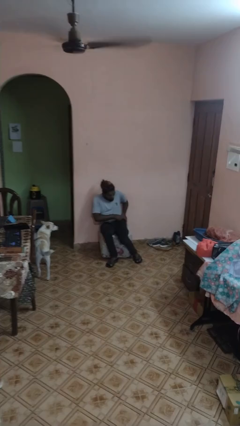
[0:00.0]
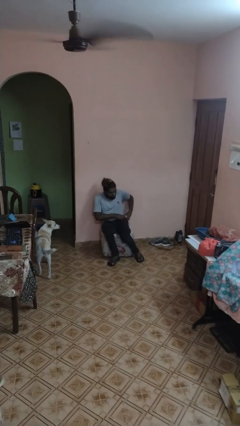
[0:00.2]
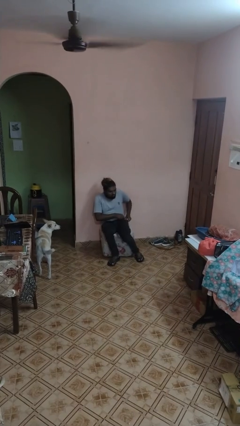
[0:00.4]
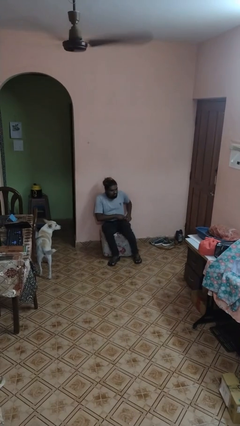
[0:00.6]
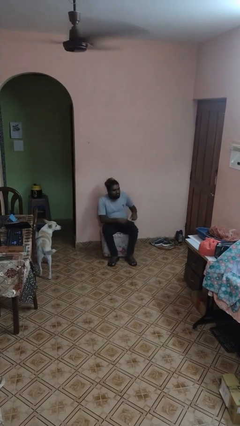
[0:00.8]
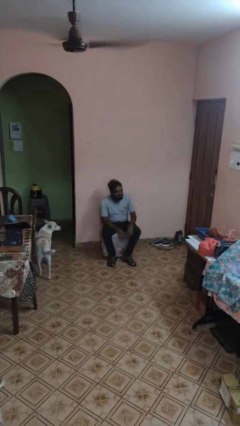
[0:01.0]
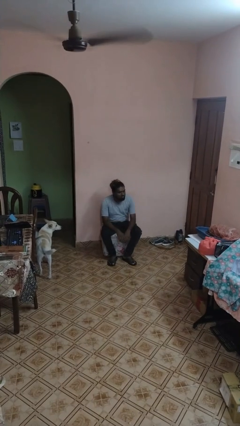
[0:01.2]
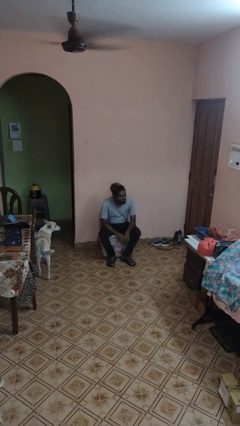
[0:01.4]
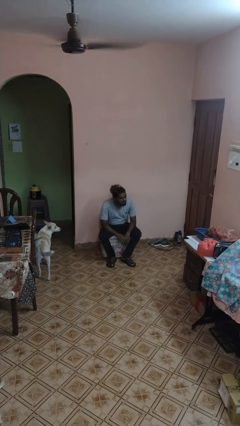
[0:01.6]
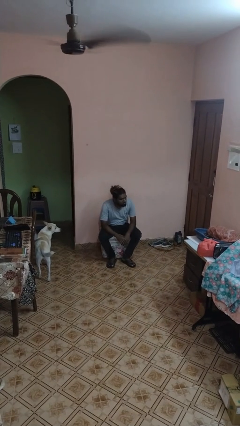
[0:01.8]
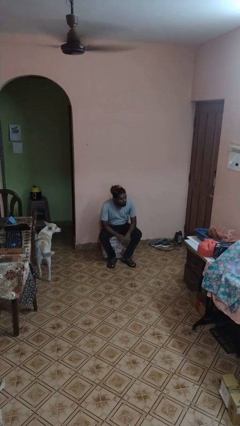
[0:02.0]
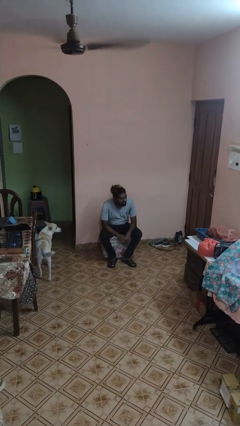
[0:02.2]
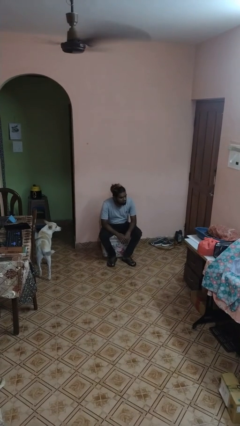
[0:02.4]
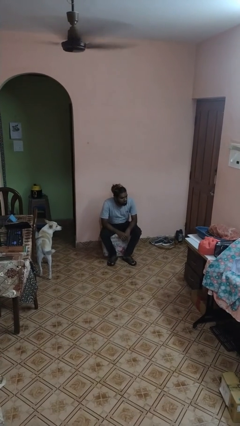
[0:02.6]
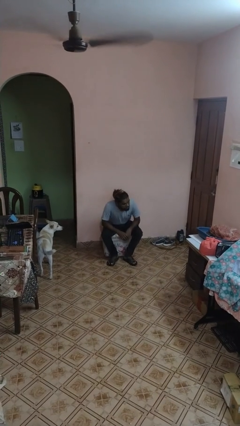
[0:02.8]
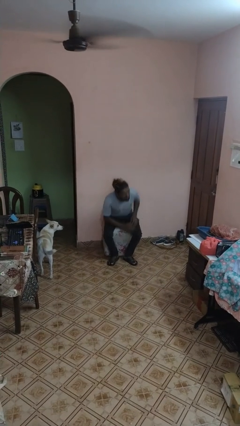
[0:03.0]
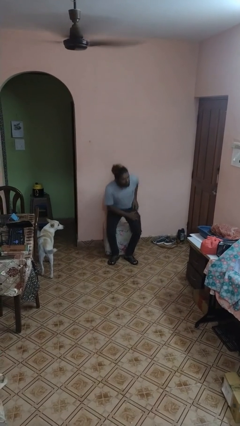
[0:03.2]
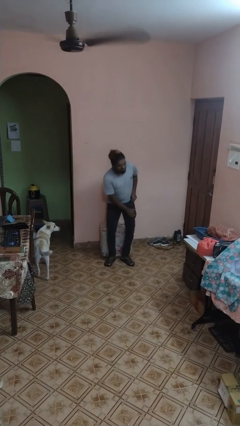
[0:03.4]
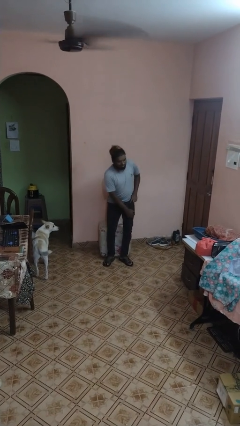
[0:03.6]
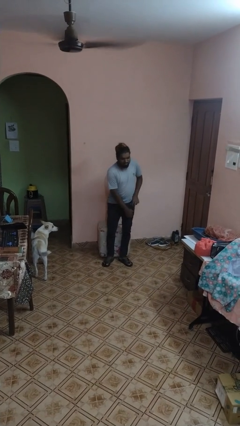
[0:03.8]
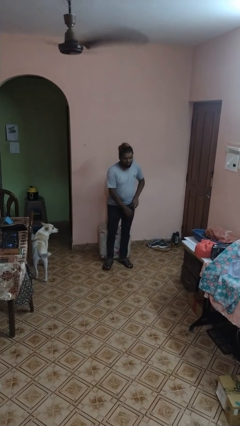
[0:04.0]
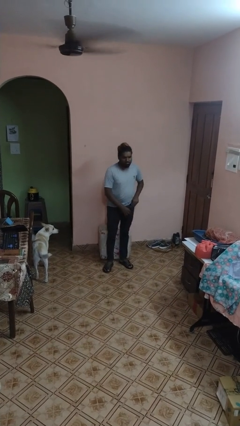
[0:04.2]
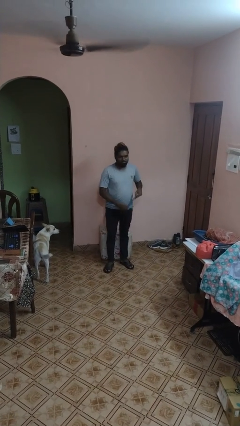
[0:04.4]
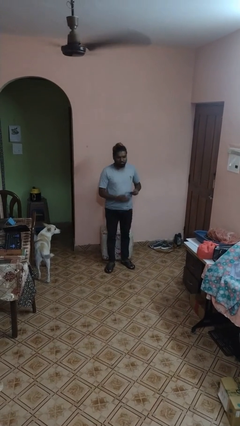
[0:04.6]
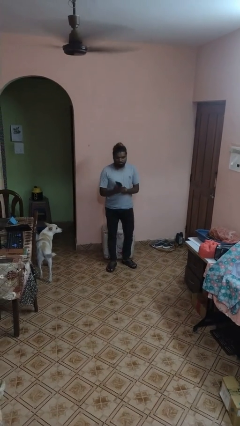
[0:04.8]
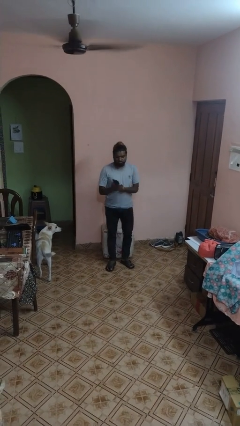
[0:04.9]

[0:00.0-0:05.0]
person puts phone into pocket

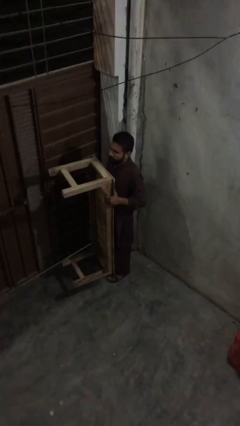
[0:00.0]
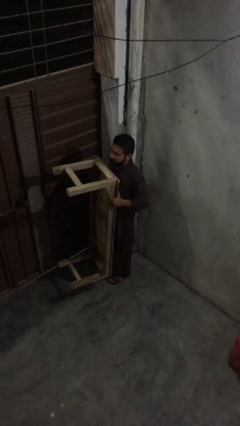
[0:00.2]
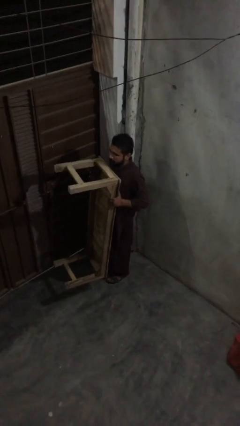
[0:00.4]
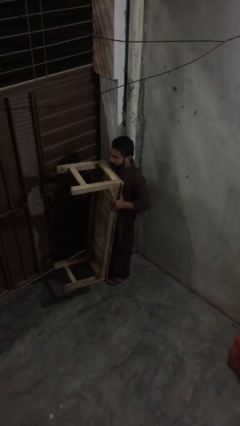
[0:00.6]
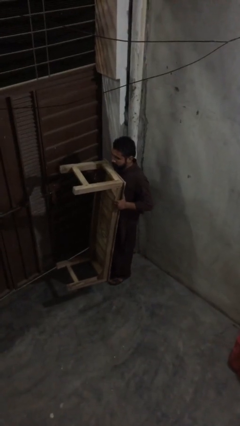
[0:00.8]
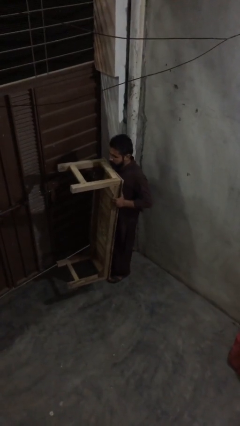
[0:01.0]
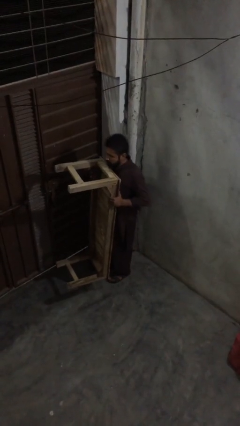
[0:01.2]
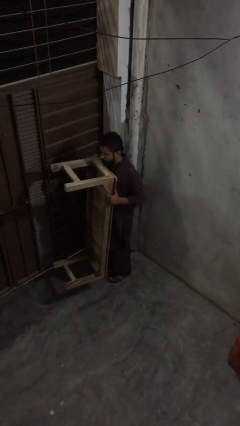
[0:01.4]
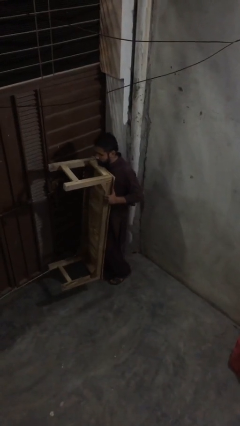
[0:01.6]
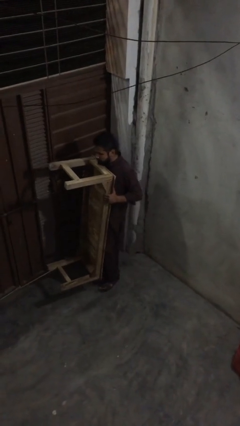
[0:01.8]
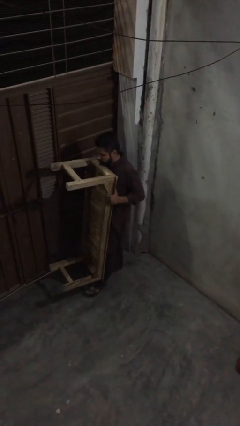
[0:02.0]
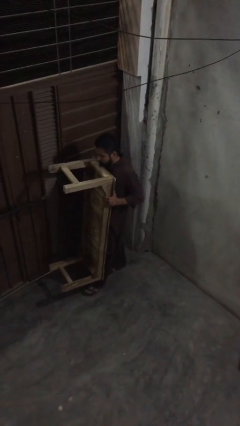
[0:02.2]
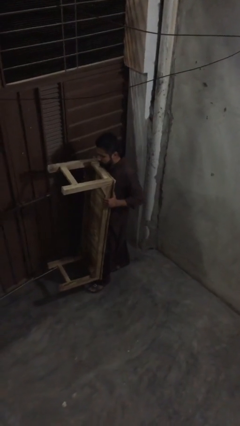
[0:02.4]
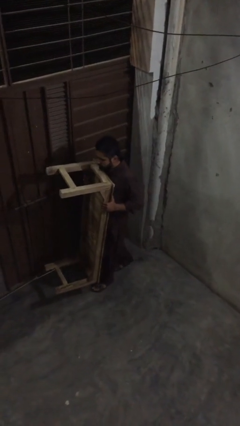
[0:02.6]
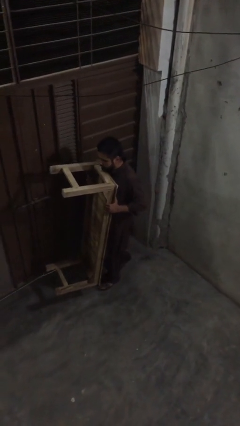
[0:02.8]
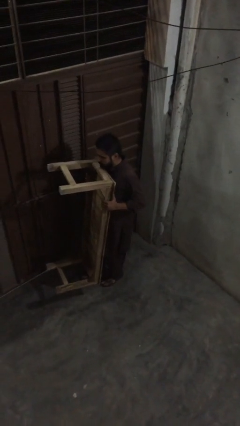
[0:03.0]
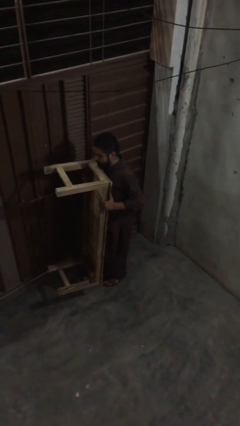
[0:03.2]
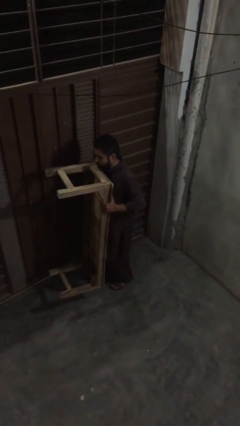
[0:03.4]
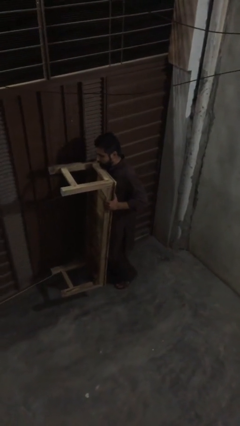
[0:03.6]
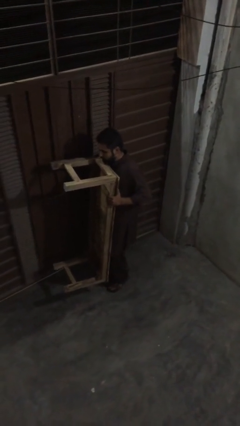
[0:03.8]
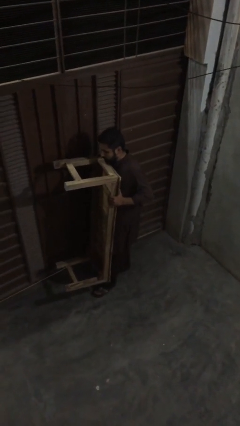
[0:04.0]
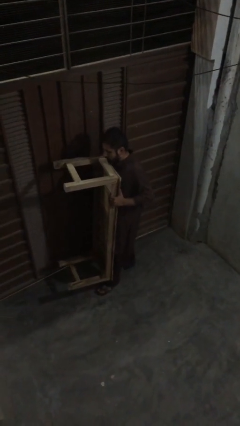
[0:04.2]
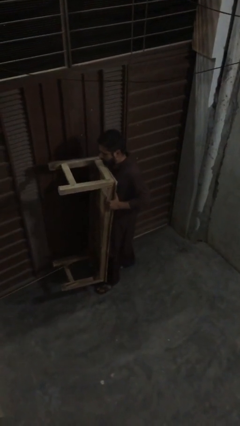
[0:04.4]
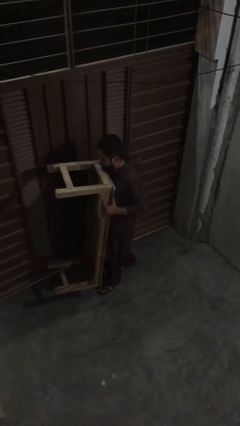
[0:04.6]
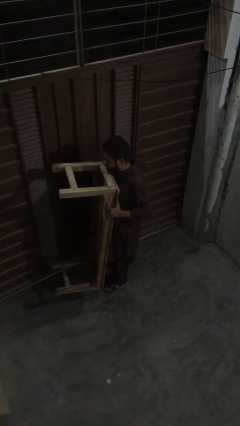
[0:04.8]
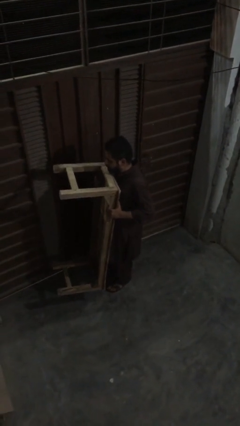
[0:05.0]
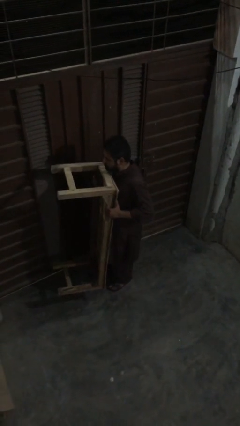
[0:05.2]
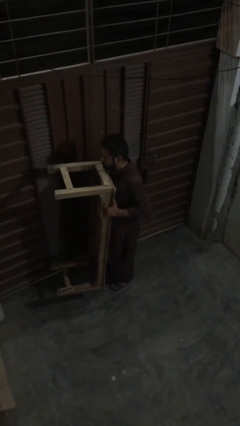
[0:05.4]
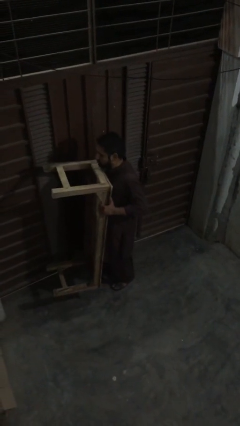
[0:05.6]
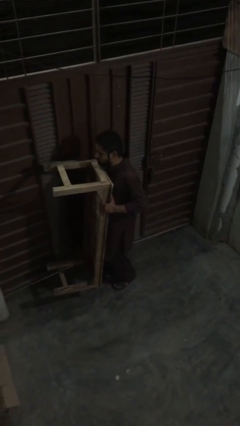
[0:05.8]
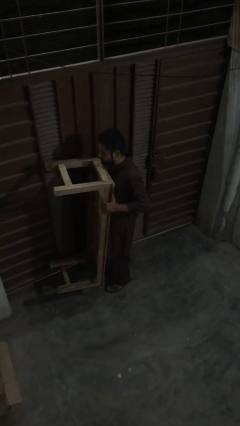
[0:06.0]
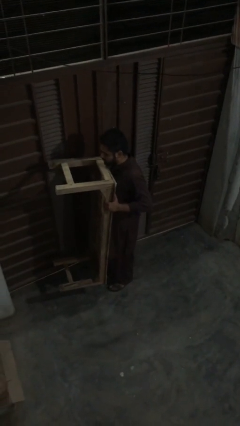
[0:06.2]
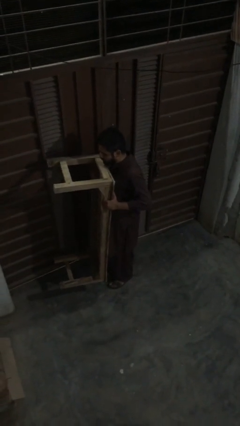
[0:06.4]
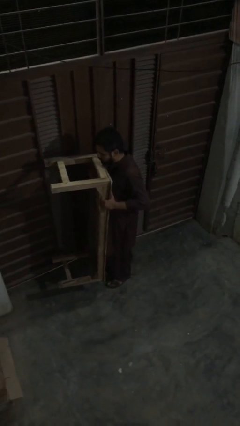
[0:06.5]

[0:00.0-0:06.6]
person carries heavy object

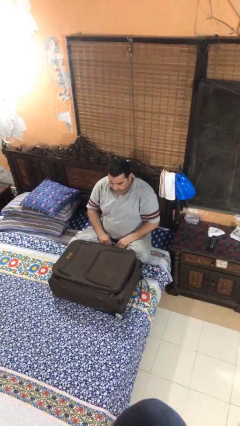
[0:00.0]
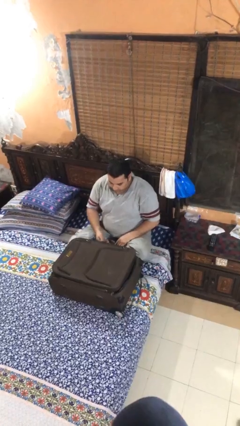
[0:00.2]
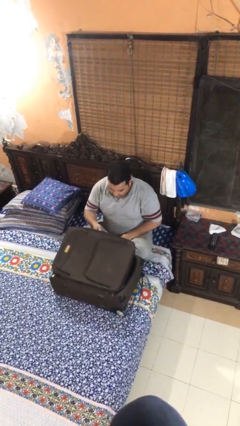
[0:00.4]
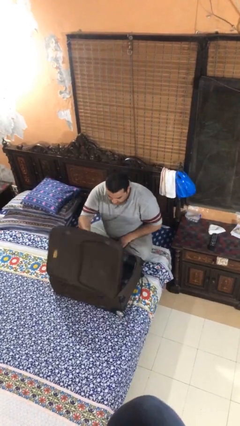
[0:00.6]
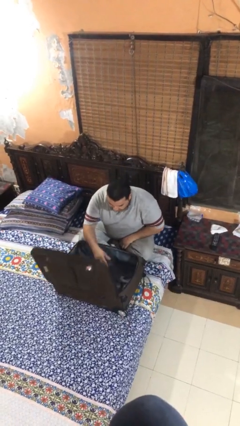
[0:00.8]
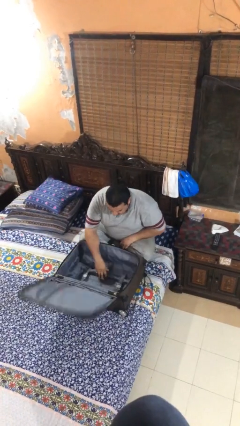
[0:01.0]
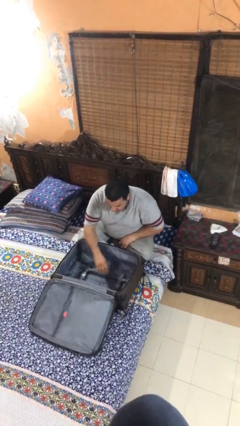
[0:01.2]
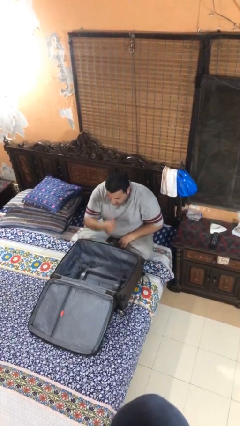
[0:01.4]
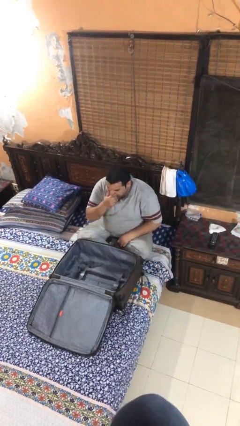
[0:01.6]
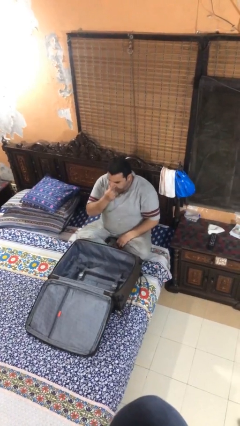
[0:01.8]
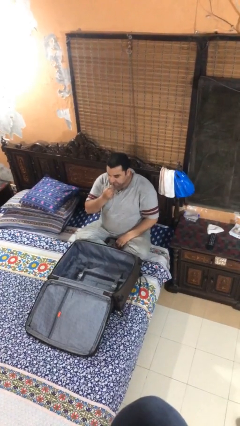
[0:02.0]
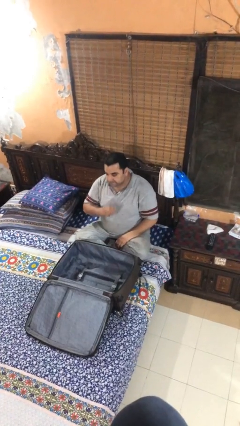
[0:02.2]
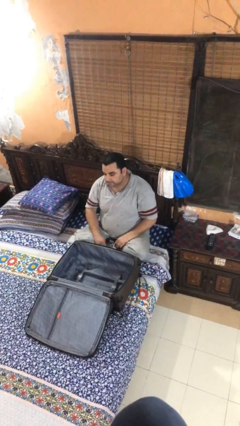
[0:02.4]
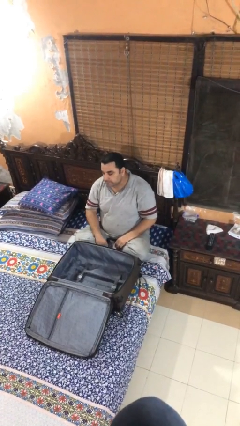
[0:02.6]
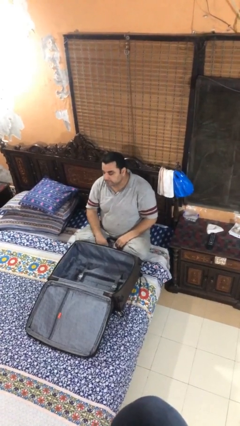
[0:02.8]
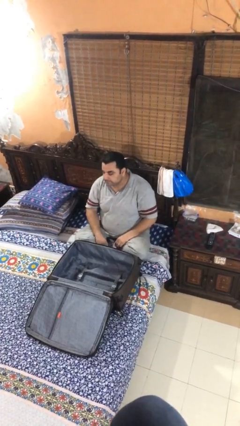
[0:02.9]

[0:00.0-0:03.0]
person opens suitcase

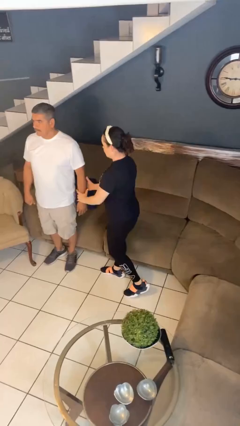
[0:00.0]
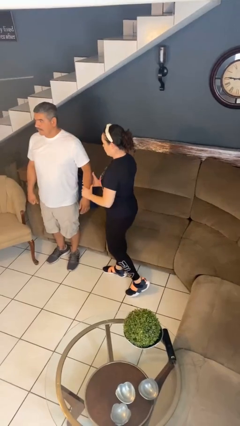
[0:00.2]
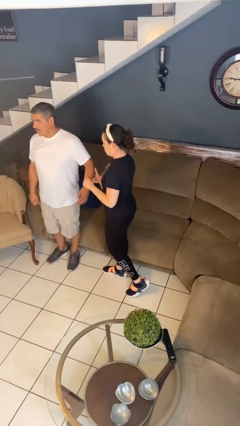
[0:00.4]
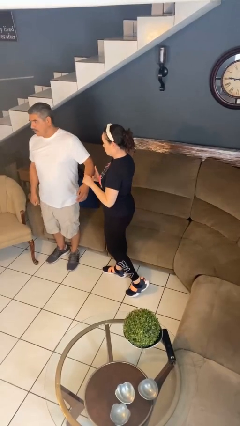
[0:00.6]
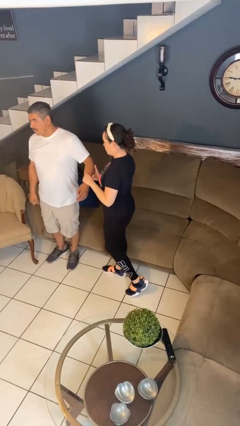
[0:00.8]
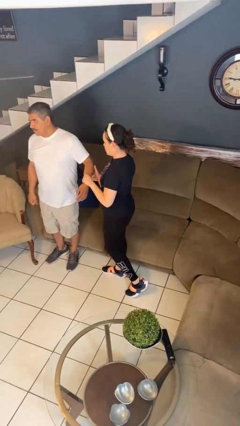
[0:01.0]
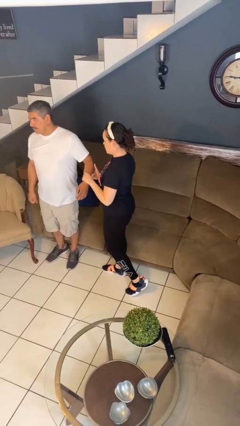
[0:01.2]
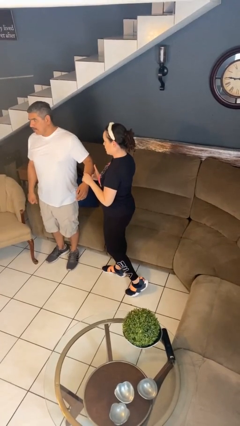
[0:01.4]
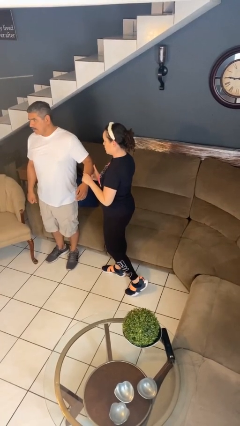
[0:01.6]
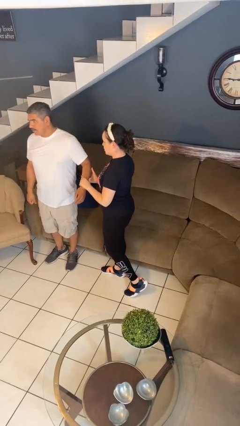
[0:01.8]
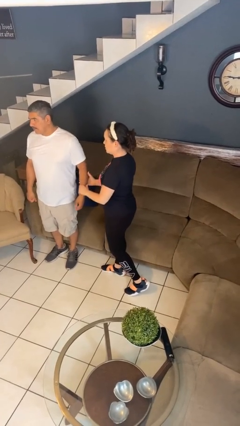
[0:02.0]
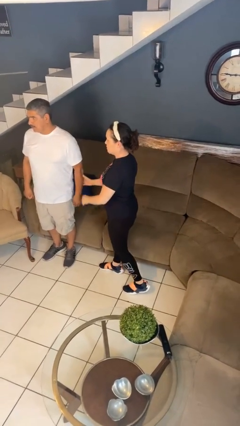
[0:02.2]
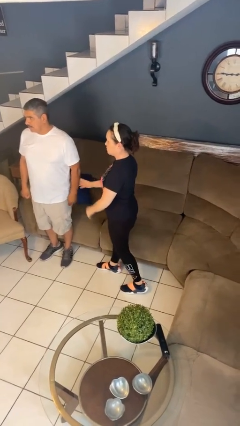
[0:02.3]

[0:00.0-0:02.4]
person grabs person by forearm

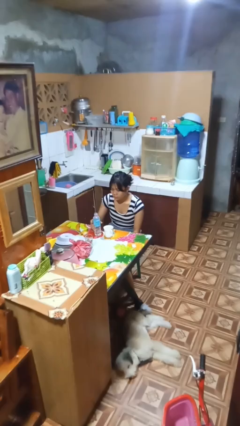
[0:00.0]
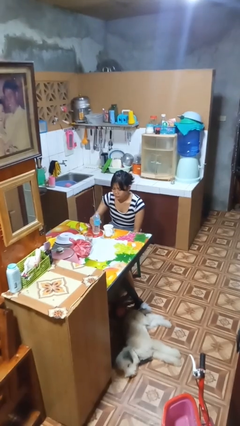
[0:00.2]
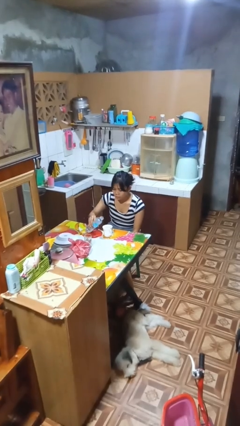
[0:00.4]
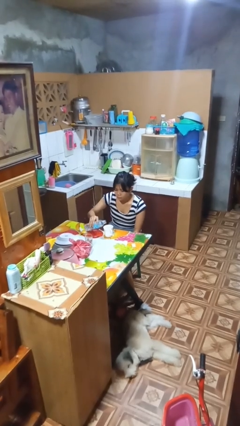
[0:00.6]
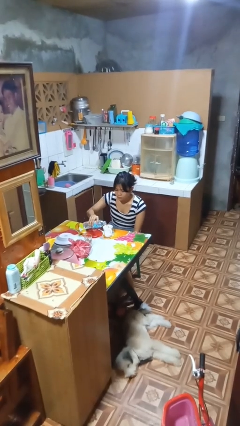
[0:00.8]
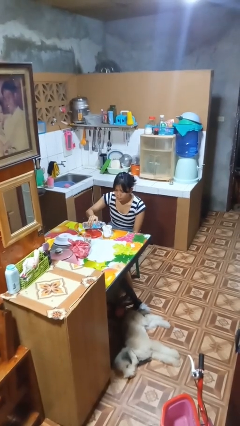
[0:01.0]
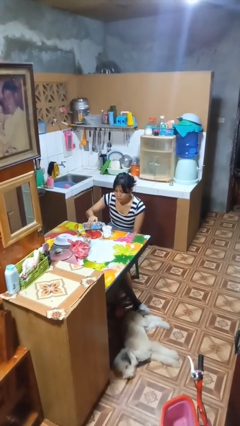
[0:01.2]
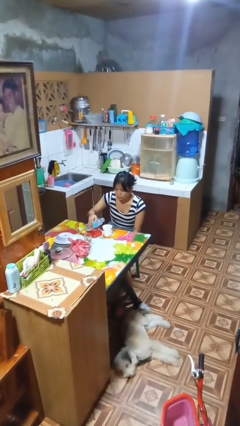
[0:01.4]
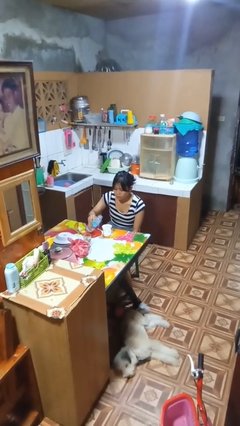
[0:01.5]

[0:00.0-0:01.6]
person pours liquid into cup
